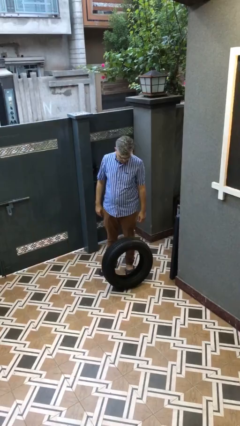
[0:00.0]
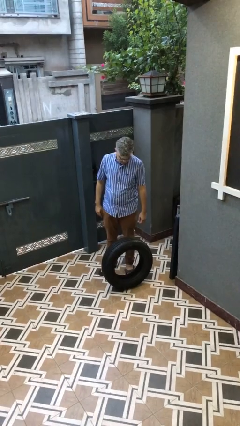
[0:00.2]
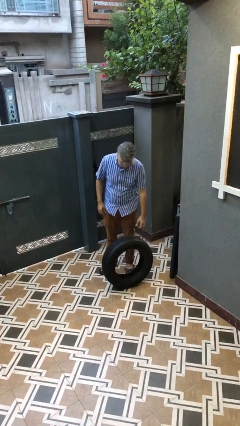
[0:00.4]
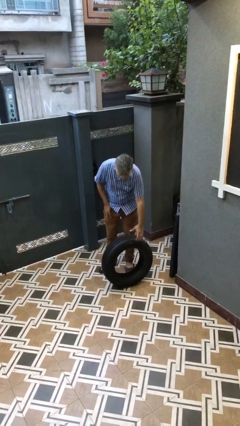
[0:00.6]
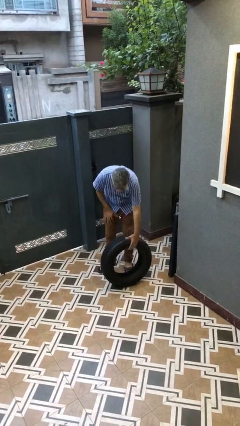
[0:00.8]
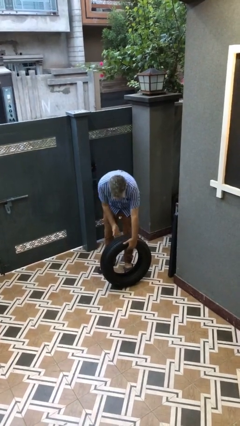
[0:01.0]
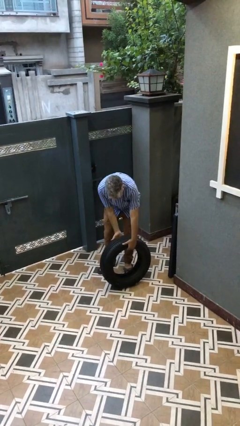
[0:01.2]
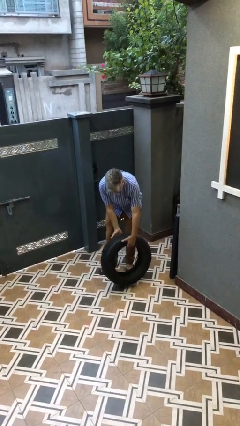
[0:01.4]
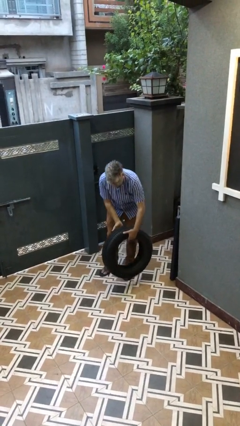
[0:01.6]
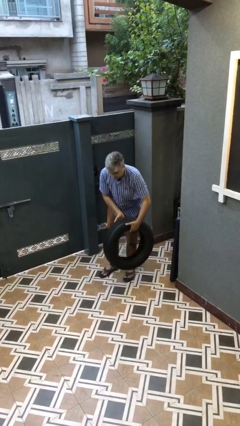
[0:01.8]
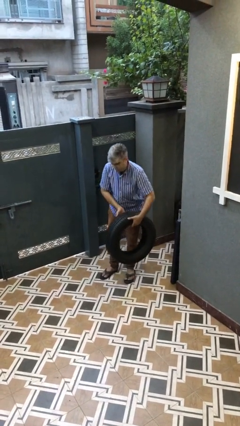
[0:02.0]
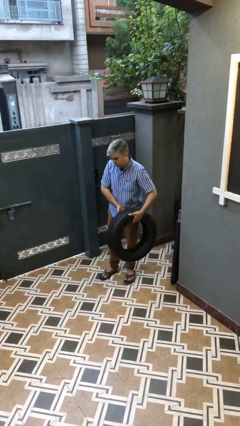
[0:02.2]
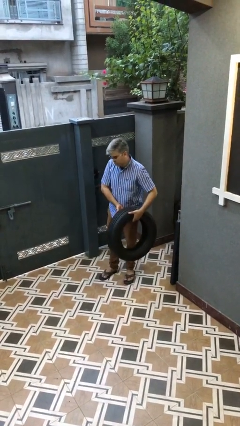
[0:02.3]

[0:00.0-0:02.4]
person picks up object from floor

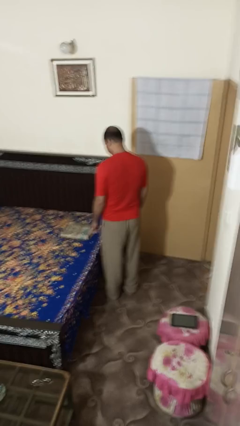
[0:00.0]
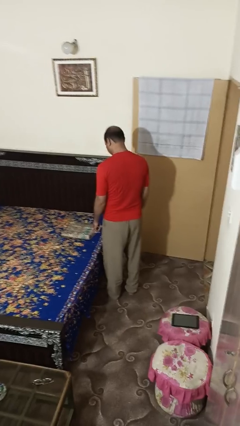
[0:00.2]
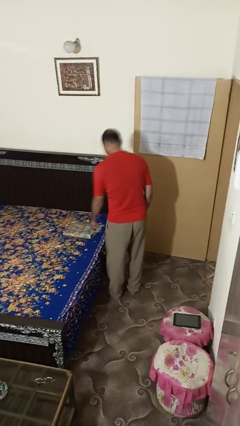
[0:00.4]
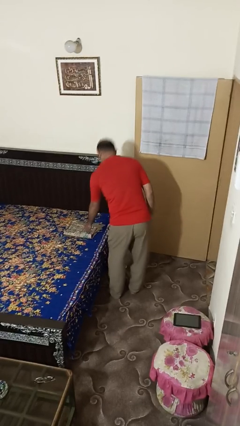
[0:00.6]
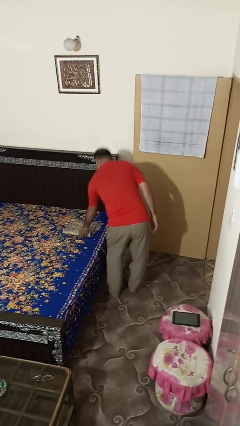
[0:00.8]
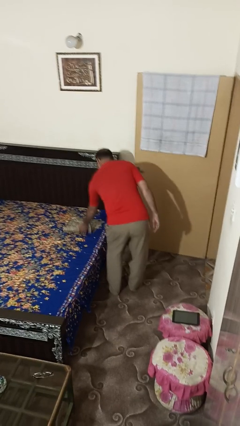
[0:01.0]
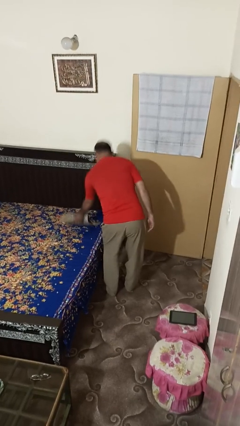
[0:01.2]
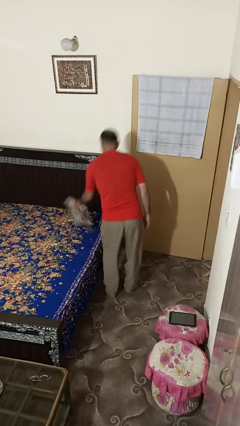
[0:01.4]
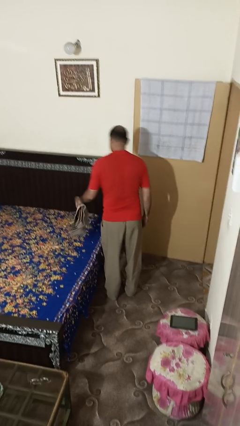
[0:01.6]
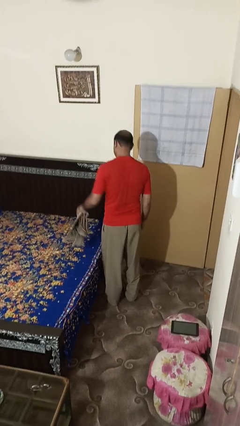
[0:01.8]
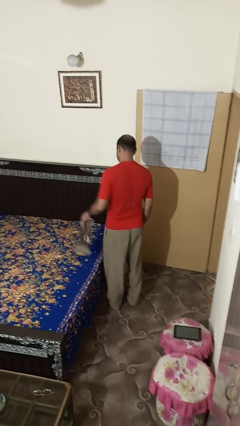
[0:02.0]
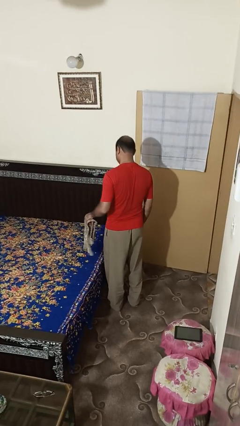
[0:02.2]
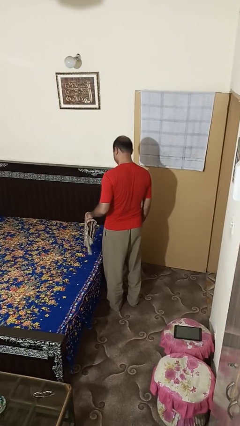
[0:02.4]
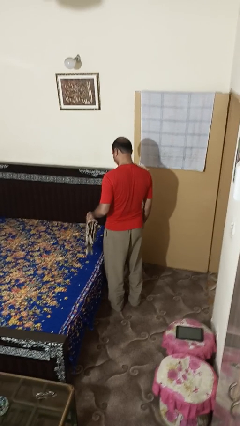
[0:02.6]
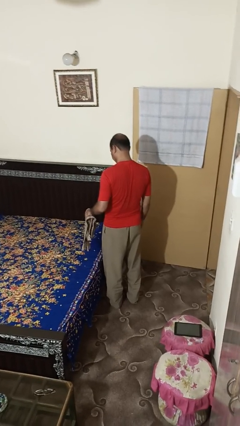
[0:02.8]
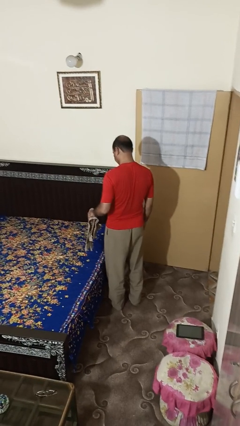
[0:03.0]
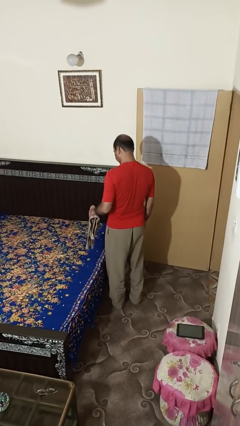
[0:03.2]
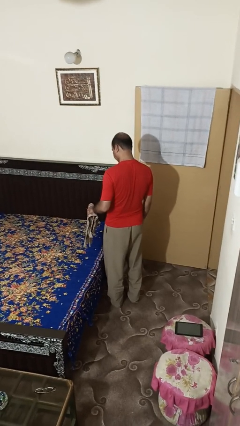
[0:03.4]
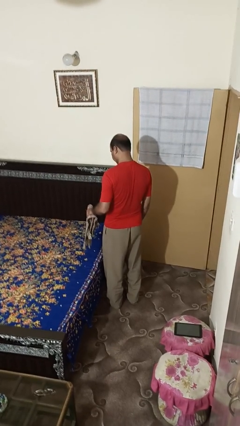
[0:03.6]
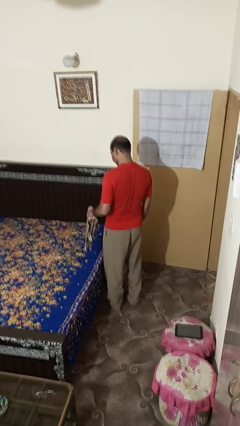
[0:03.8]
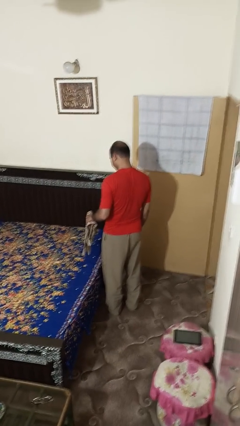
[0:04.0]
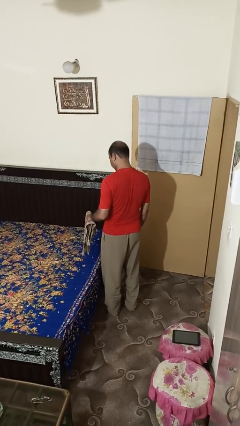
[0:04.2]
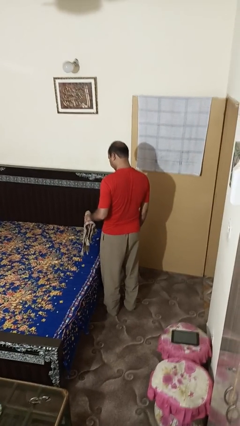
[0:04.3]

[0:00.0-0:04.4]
person picks up object from bed

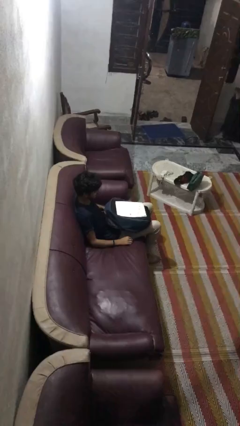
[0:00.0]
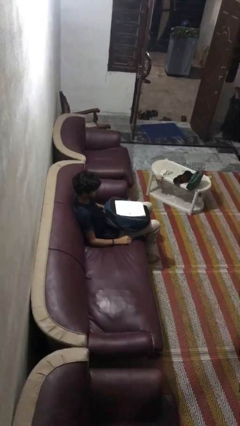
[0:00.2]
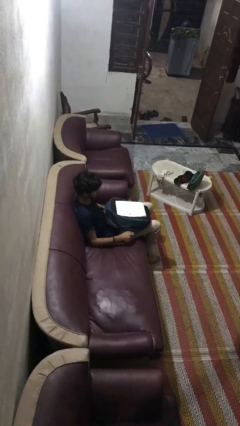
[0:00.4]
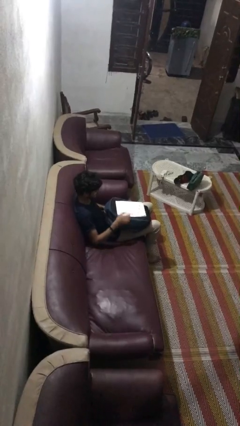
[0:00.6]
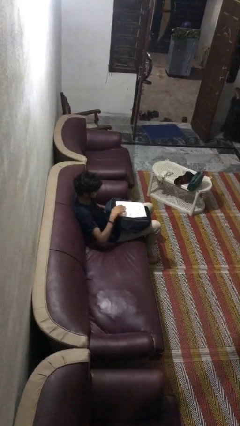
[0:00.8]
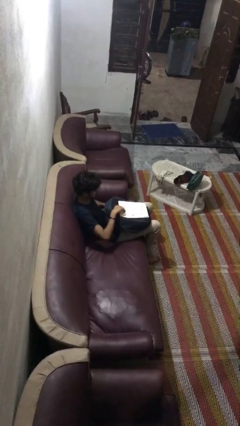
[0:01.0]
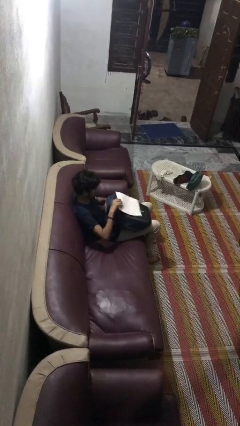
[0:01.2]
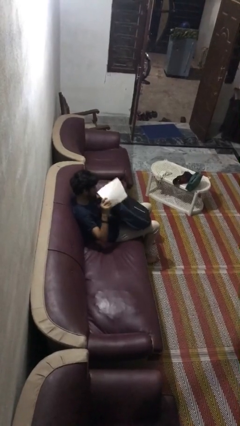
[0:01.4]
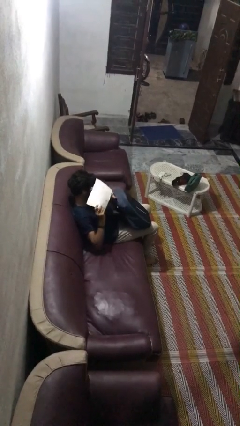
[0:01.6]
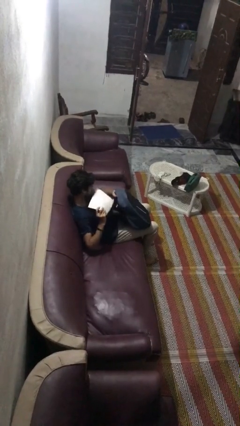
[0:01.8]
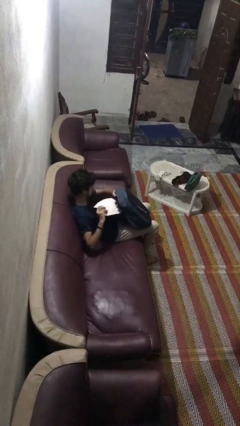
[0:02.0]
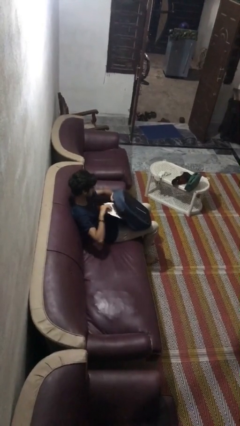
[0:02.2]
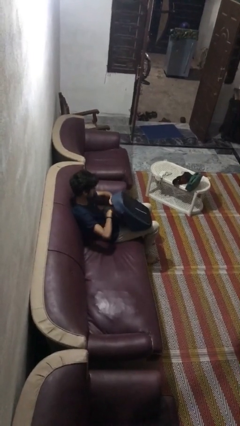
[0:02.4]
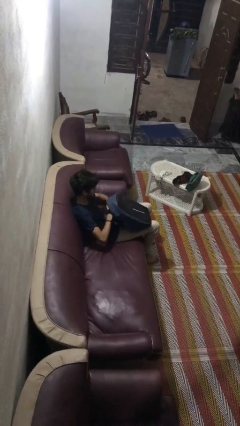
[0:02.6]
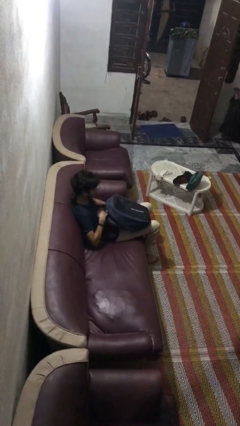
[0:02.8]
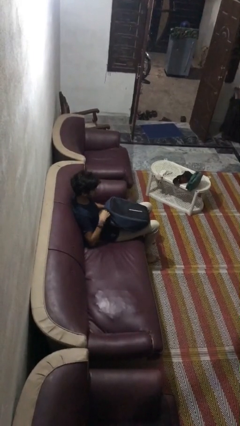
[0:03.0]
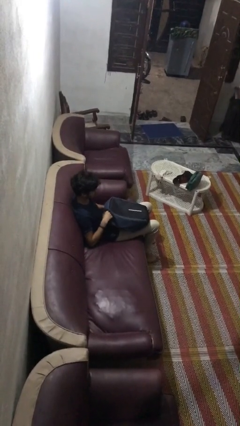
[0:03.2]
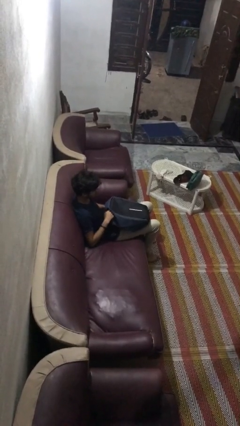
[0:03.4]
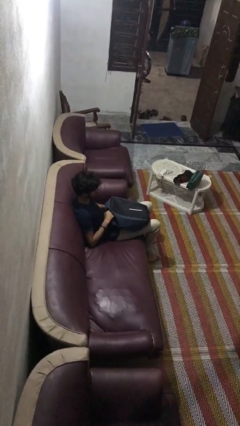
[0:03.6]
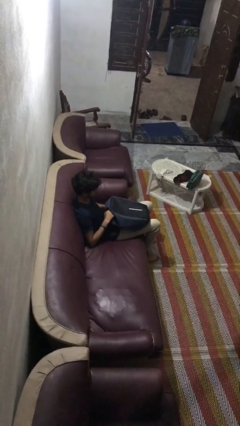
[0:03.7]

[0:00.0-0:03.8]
person puts object into backpack

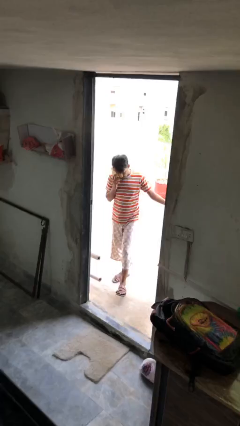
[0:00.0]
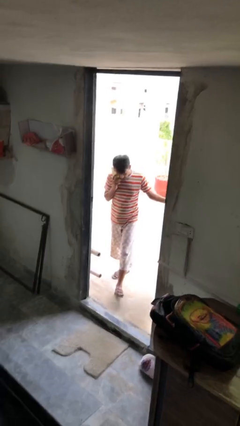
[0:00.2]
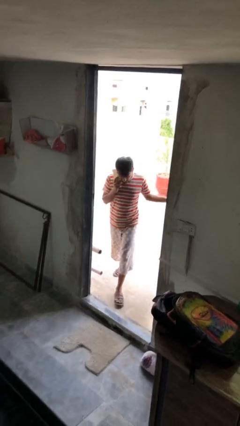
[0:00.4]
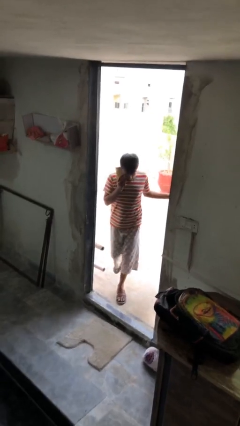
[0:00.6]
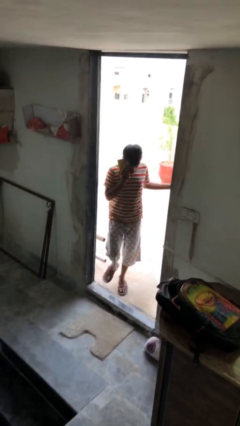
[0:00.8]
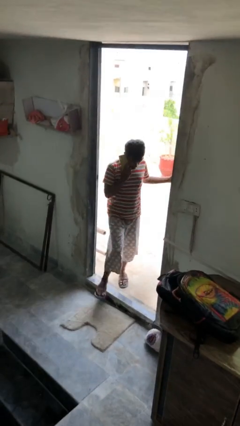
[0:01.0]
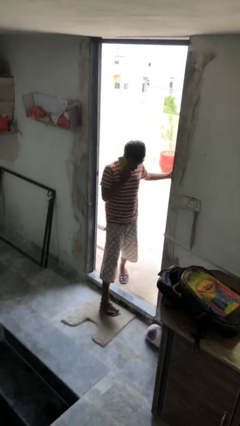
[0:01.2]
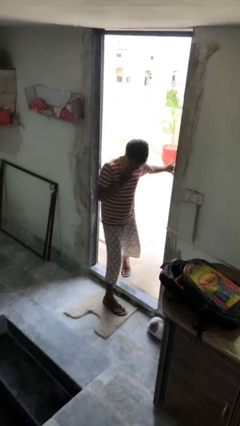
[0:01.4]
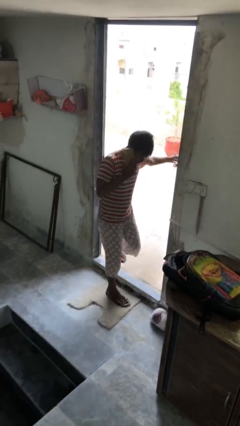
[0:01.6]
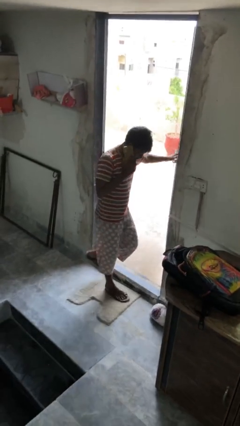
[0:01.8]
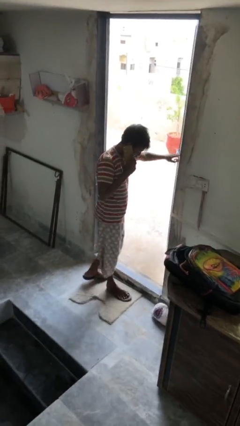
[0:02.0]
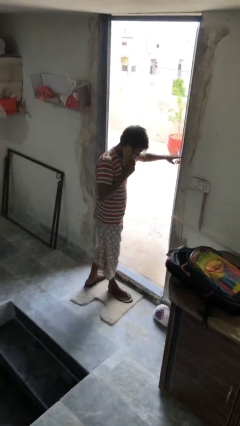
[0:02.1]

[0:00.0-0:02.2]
person enters scene through structure

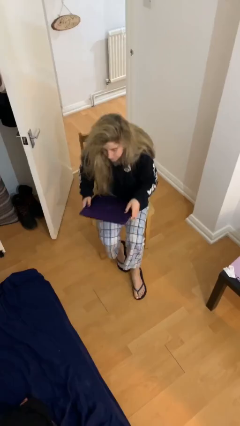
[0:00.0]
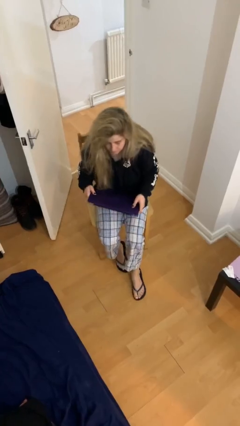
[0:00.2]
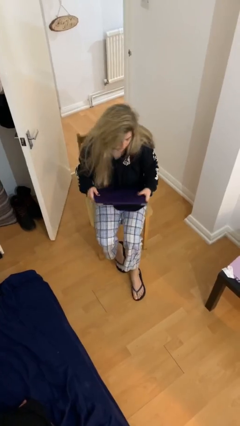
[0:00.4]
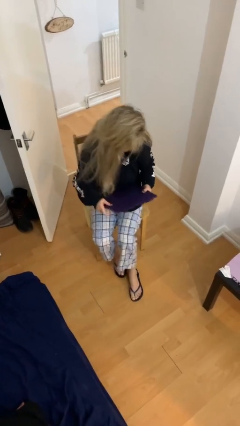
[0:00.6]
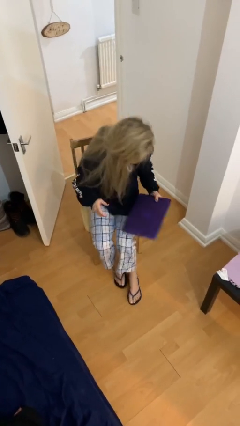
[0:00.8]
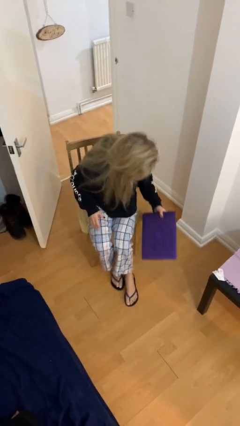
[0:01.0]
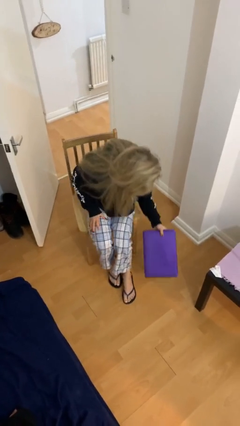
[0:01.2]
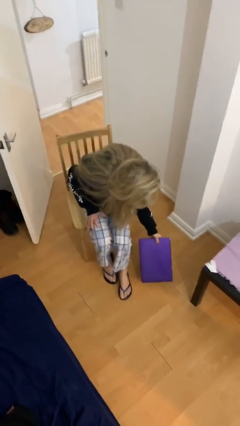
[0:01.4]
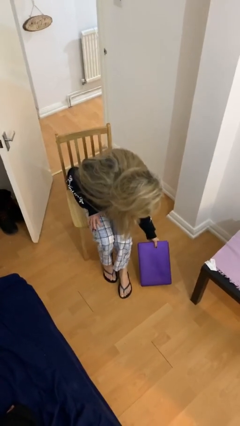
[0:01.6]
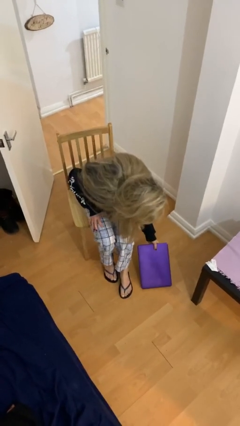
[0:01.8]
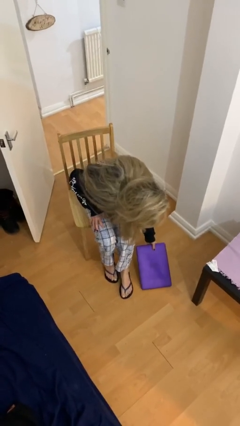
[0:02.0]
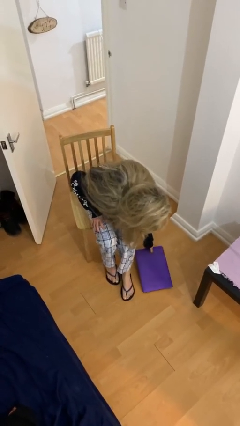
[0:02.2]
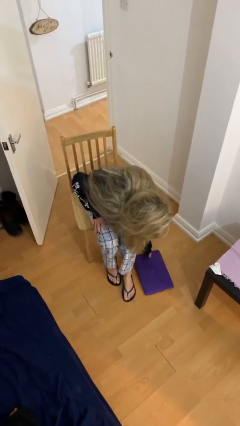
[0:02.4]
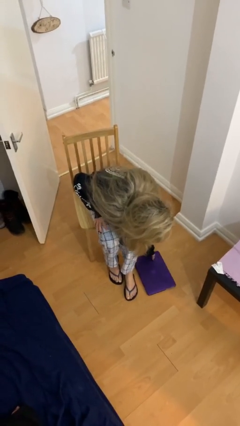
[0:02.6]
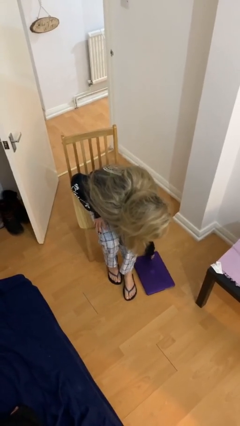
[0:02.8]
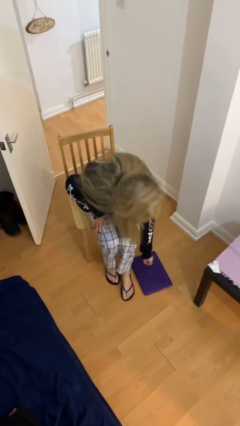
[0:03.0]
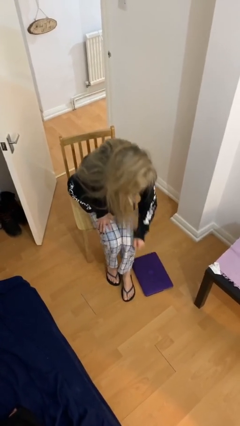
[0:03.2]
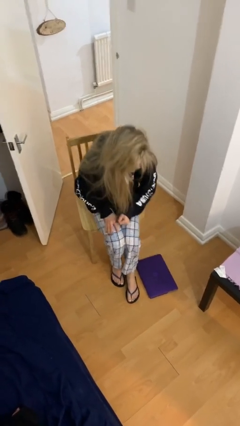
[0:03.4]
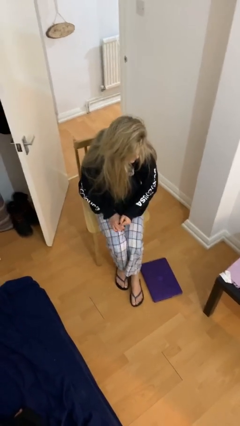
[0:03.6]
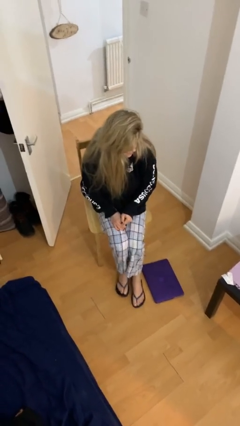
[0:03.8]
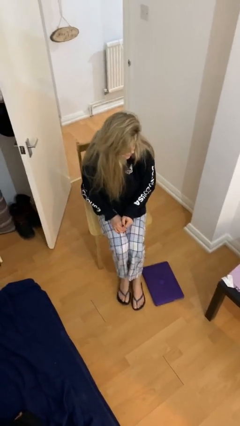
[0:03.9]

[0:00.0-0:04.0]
person puts down object on floor

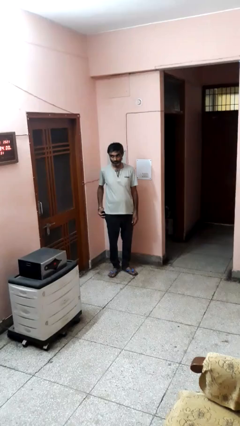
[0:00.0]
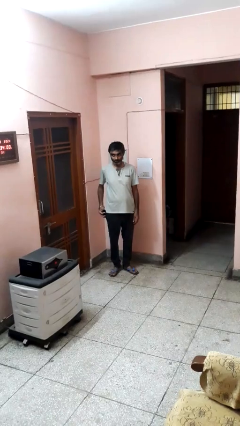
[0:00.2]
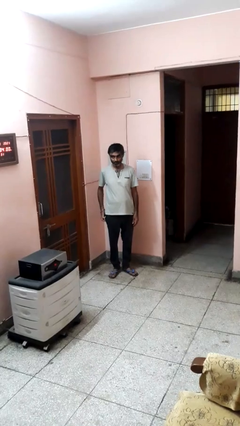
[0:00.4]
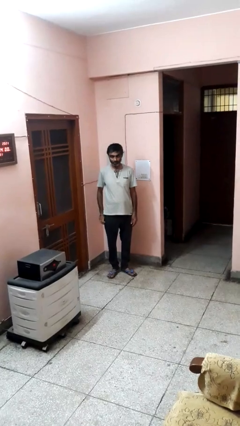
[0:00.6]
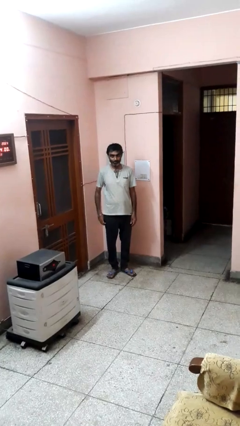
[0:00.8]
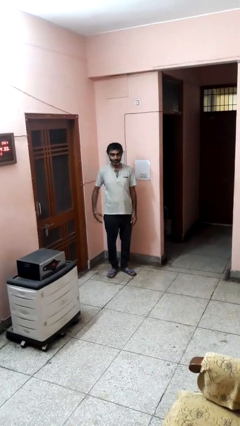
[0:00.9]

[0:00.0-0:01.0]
person puts phone into pocket
